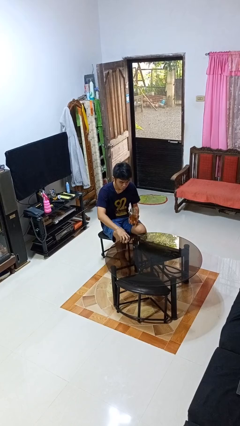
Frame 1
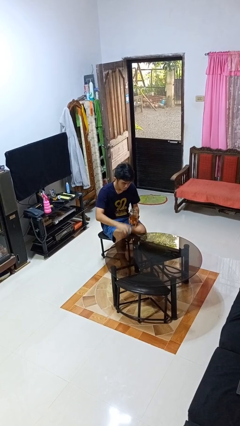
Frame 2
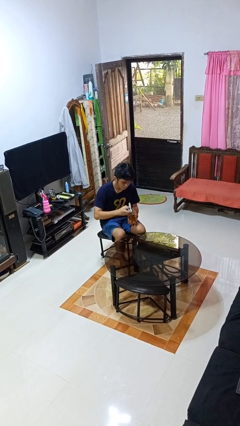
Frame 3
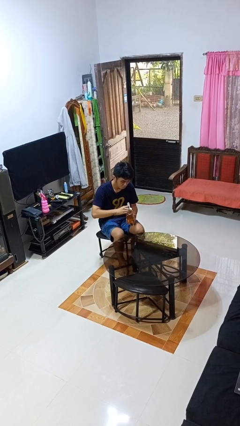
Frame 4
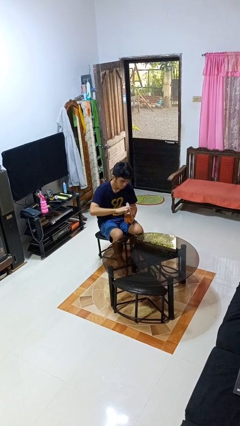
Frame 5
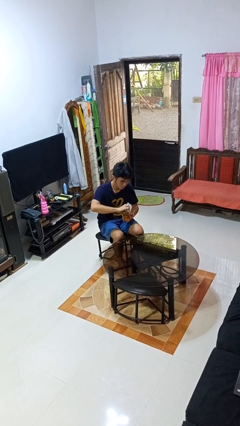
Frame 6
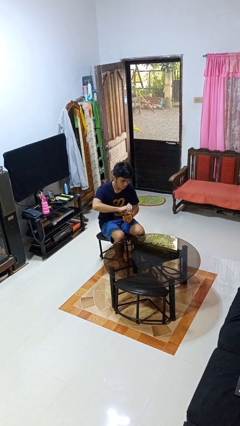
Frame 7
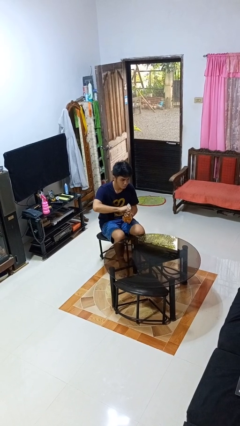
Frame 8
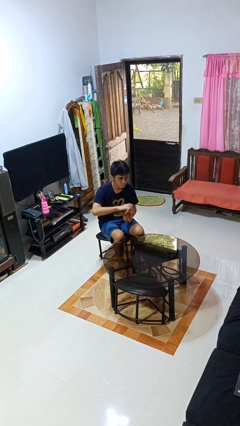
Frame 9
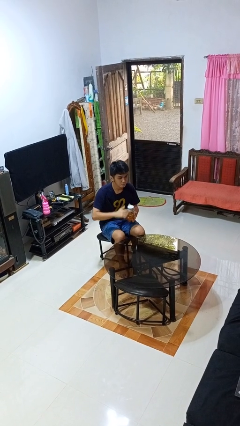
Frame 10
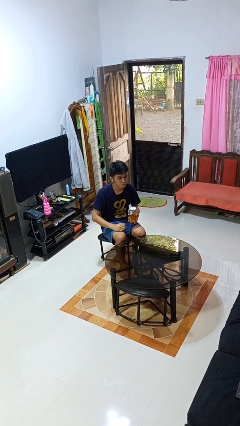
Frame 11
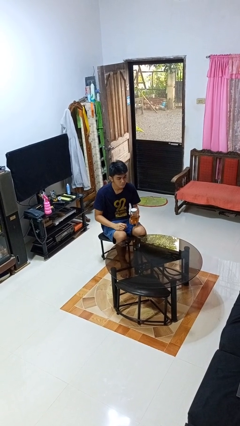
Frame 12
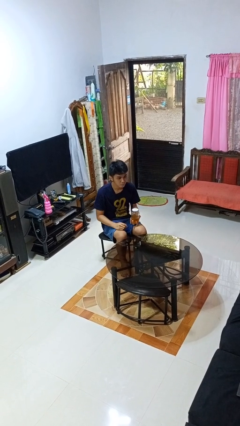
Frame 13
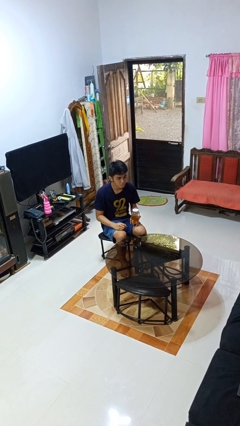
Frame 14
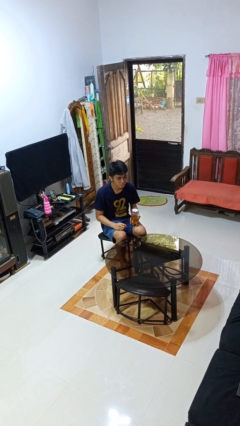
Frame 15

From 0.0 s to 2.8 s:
person closes jar

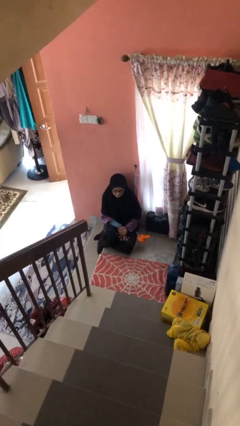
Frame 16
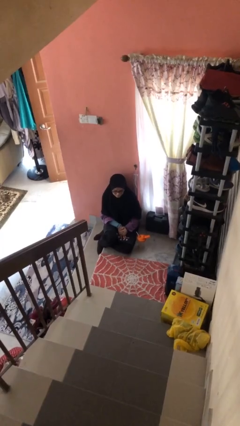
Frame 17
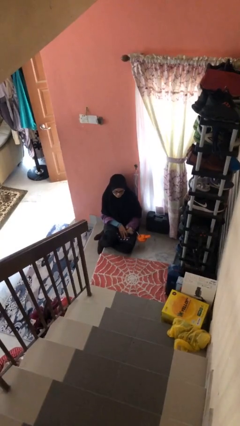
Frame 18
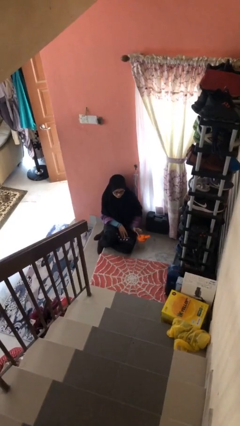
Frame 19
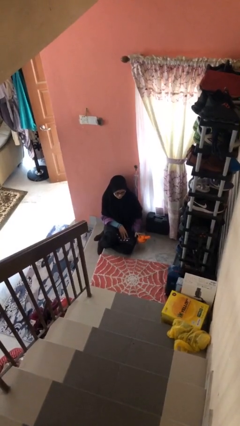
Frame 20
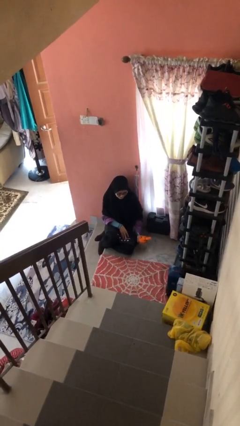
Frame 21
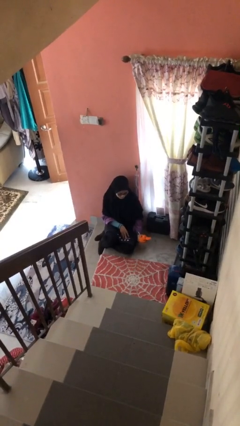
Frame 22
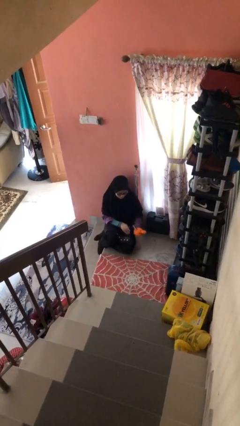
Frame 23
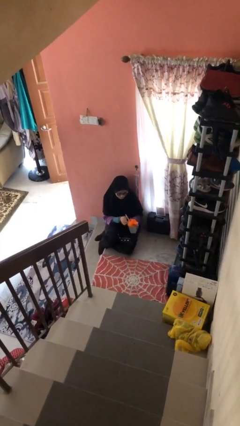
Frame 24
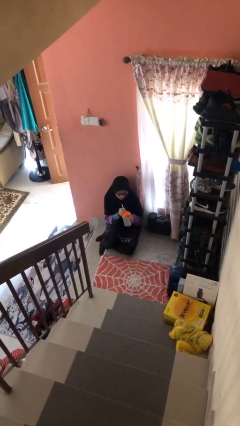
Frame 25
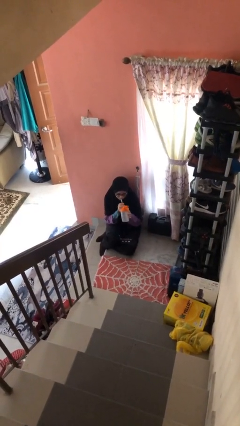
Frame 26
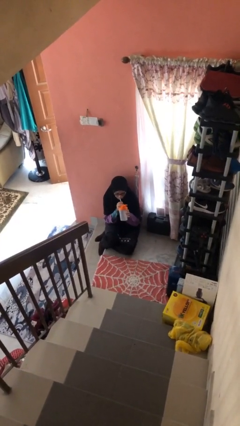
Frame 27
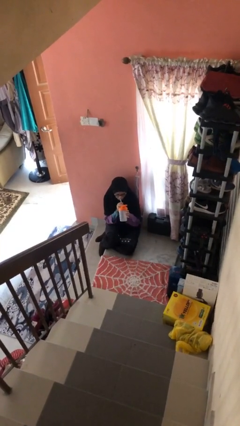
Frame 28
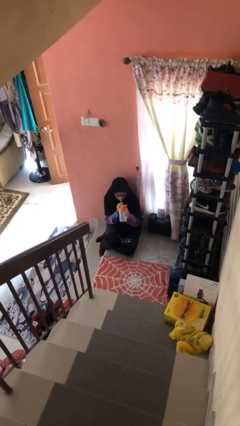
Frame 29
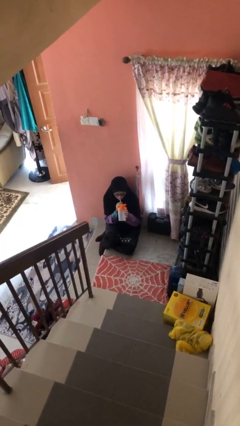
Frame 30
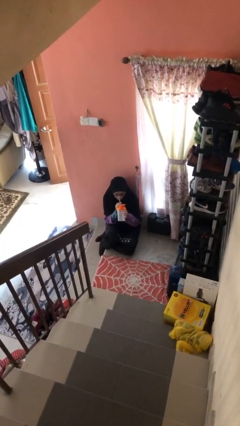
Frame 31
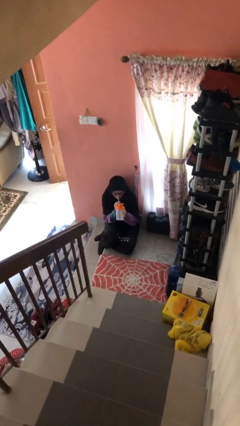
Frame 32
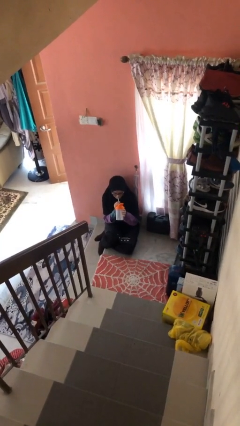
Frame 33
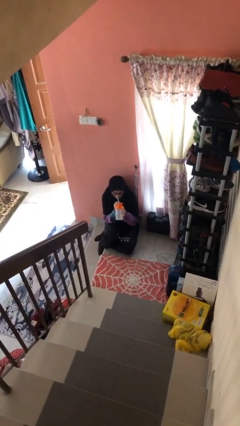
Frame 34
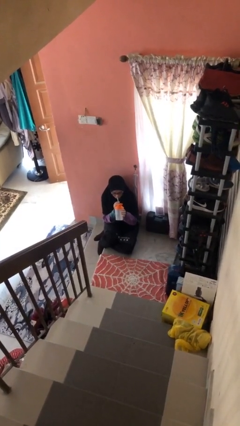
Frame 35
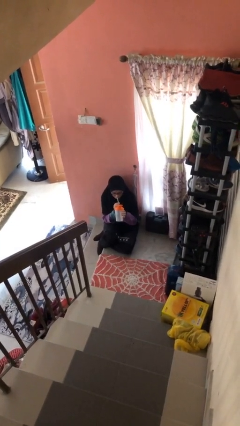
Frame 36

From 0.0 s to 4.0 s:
person drinks from straw

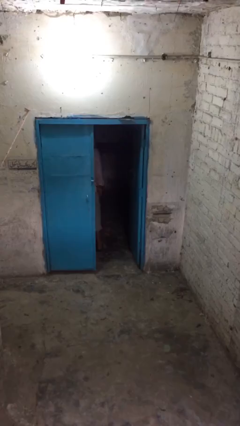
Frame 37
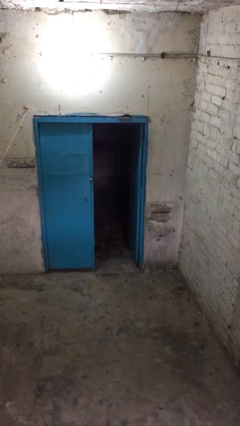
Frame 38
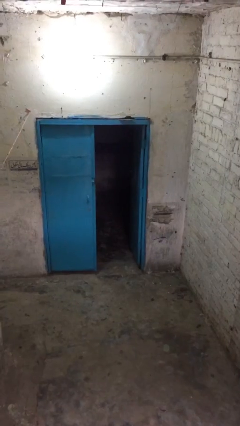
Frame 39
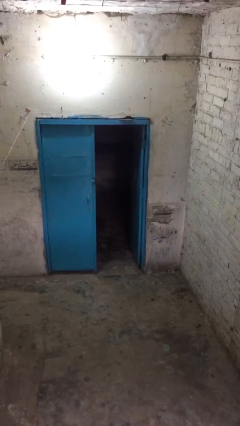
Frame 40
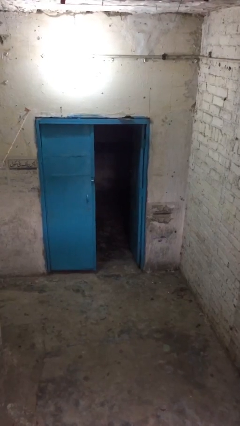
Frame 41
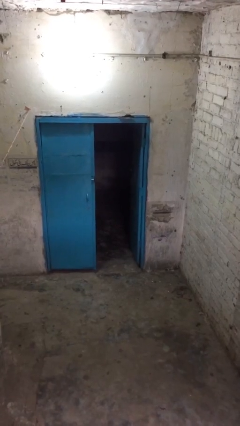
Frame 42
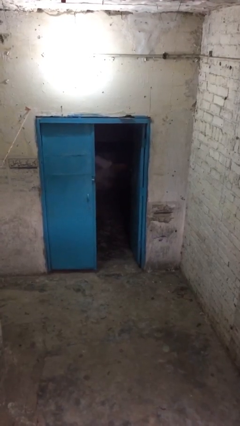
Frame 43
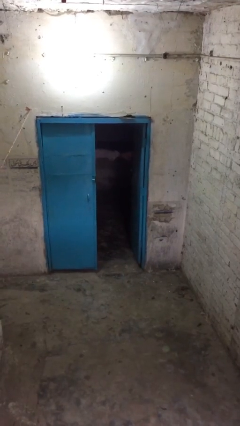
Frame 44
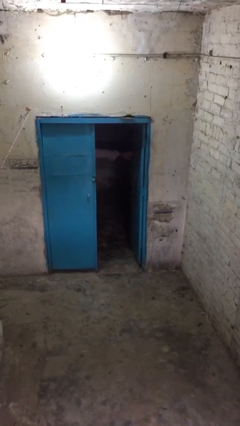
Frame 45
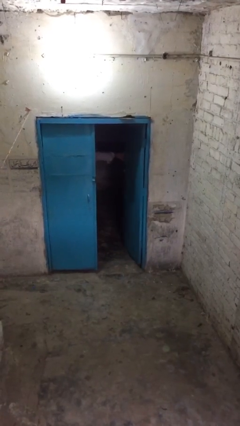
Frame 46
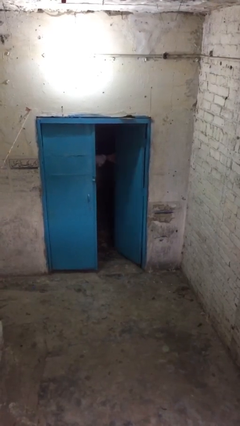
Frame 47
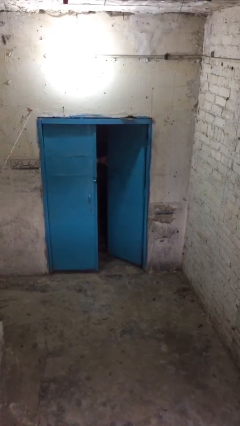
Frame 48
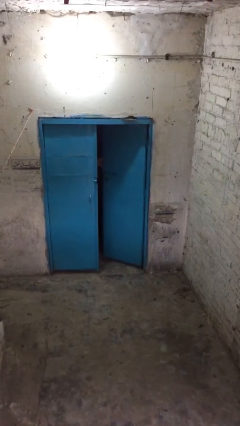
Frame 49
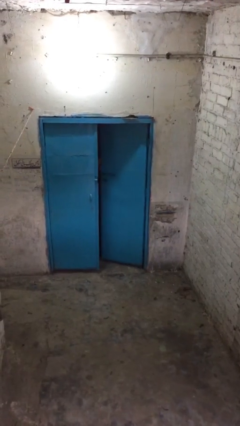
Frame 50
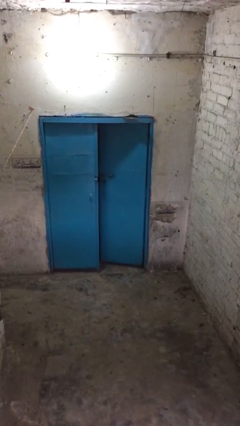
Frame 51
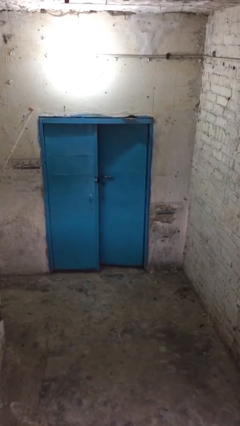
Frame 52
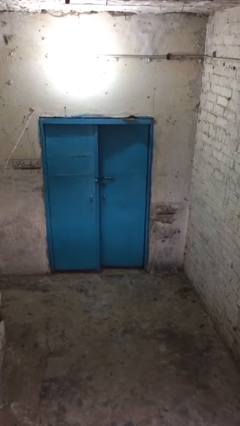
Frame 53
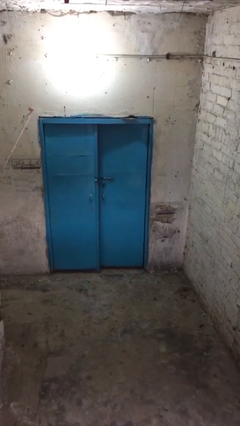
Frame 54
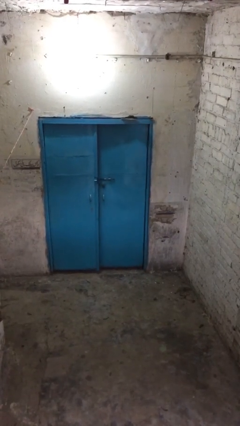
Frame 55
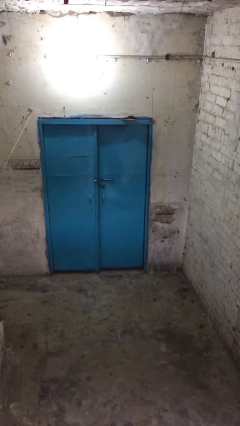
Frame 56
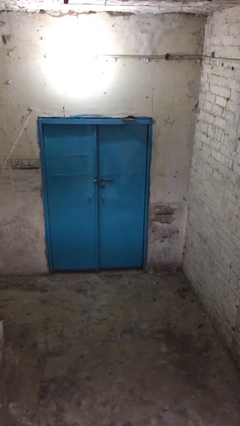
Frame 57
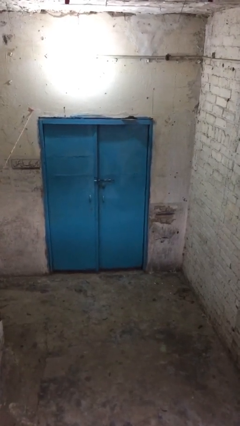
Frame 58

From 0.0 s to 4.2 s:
person closes facility door

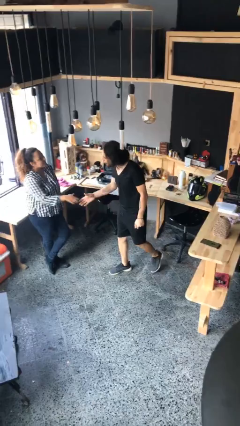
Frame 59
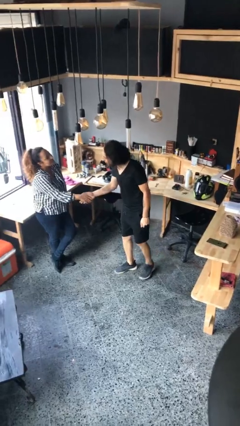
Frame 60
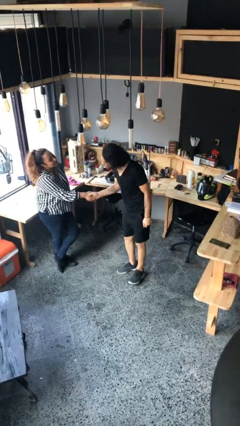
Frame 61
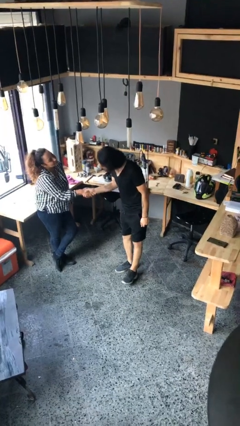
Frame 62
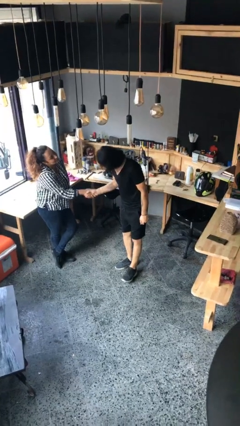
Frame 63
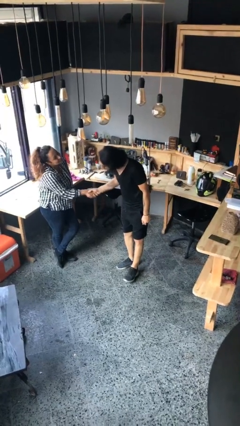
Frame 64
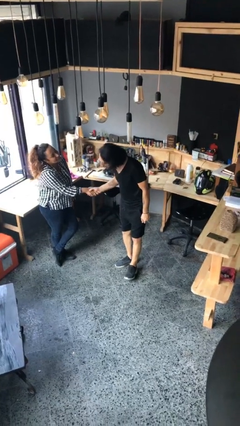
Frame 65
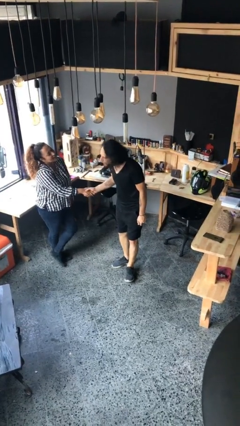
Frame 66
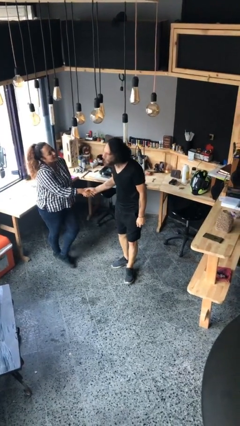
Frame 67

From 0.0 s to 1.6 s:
person shakes hand

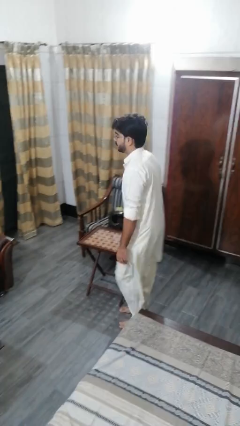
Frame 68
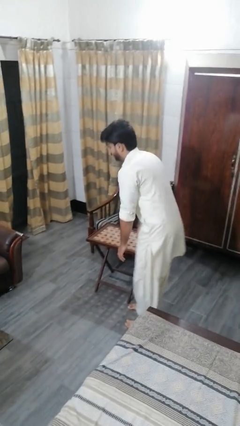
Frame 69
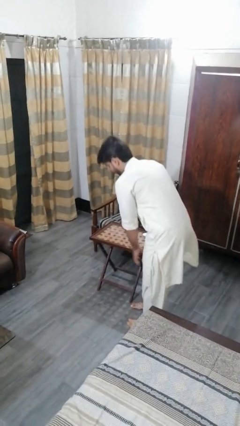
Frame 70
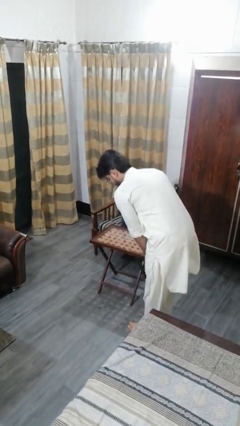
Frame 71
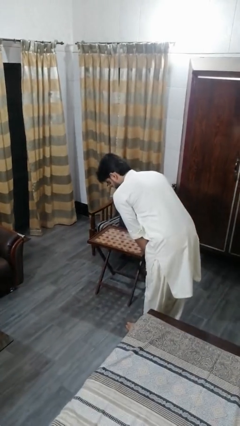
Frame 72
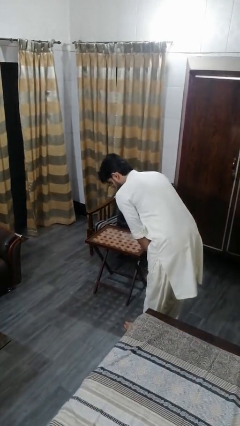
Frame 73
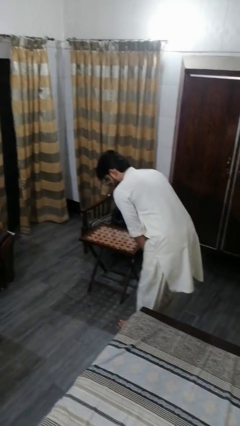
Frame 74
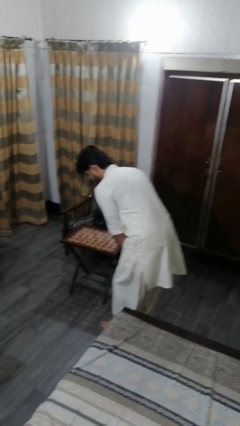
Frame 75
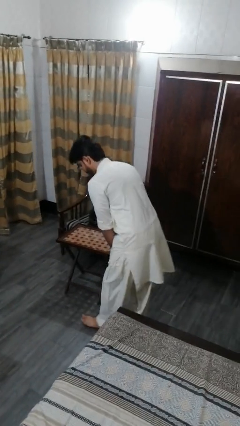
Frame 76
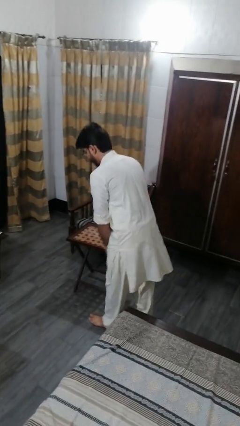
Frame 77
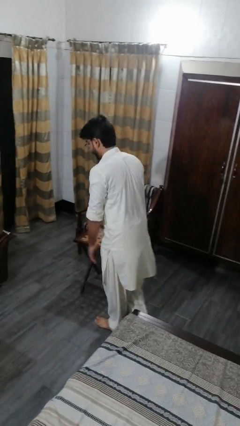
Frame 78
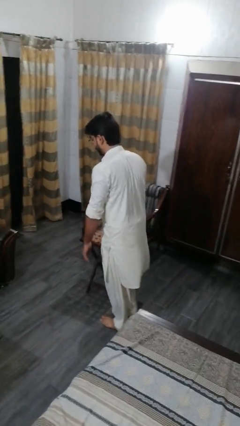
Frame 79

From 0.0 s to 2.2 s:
person bumps into table

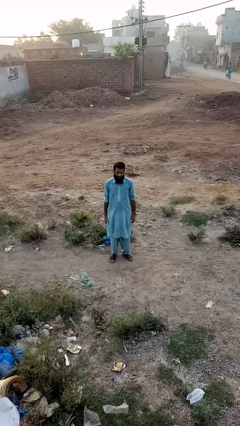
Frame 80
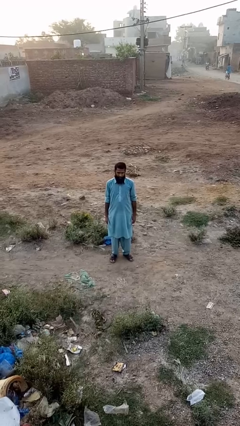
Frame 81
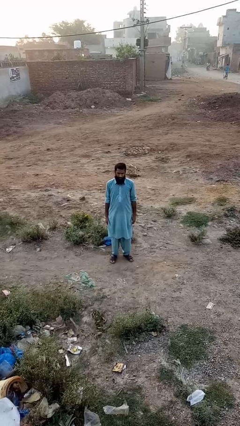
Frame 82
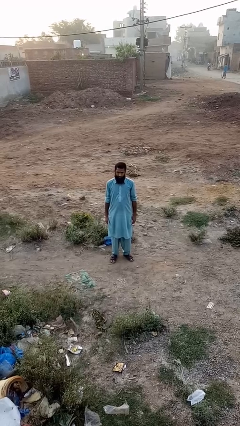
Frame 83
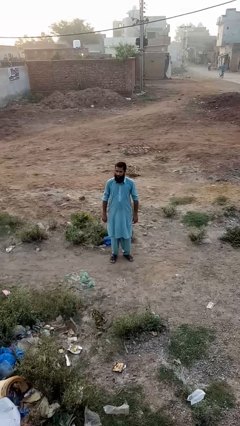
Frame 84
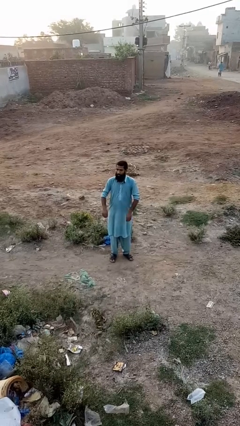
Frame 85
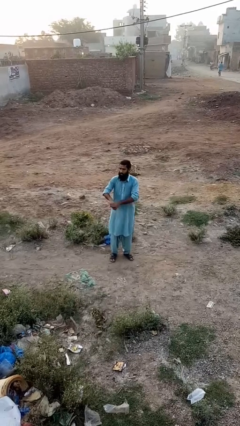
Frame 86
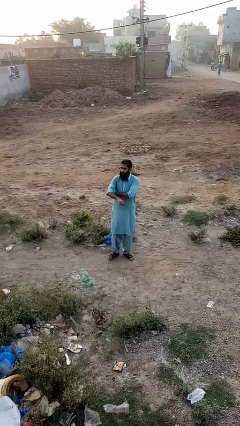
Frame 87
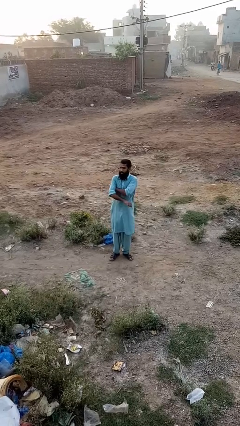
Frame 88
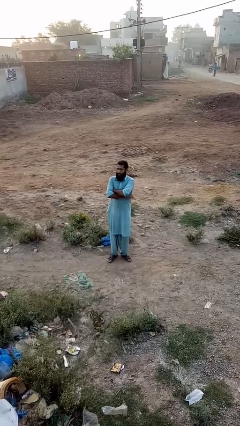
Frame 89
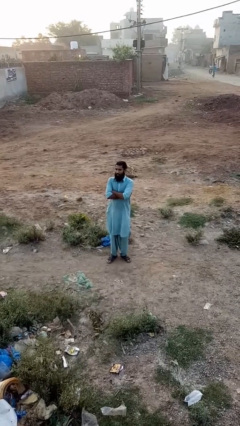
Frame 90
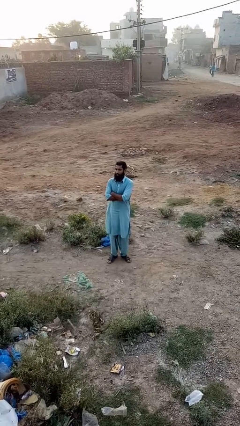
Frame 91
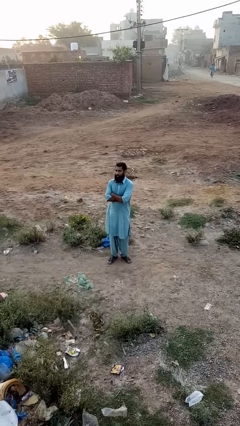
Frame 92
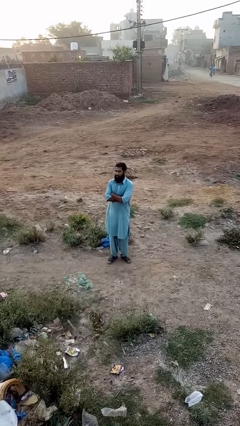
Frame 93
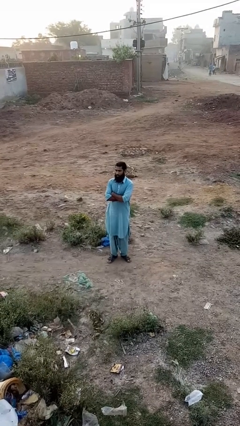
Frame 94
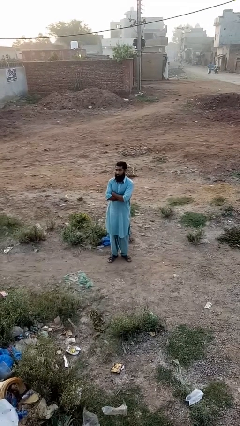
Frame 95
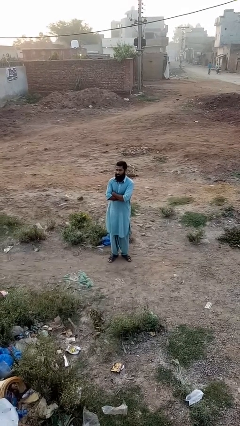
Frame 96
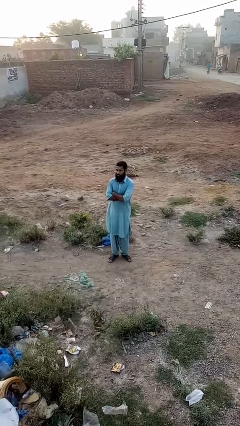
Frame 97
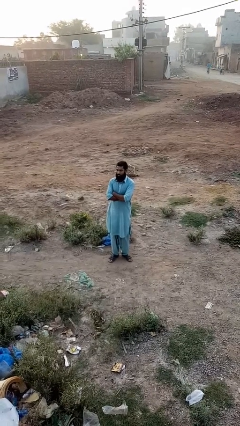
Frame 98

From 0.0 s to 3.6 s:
person crosses arms
